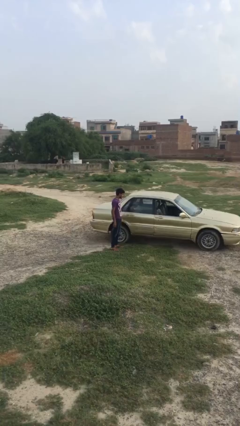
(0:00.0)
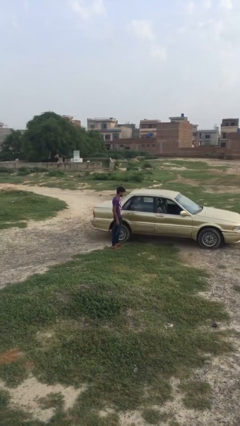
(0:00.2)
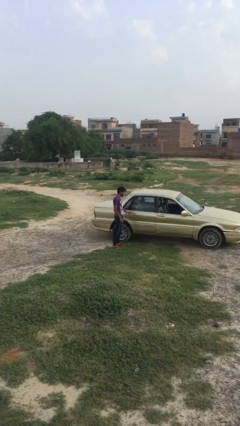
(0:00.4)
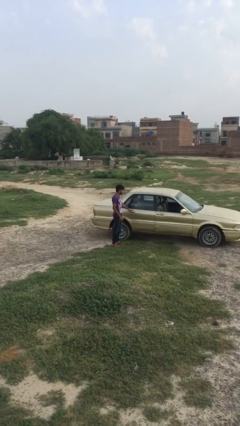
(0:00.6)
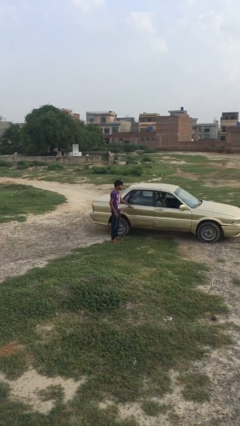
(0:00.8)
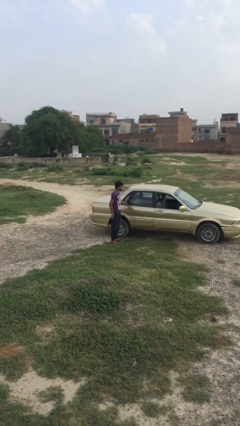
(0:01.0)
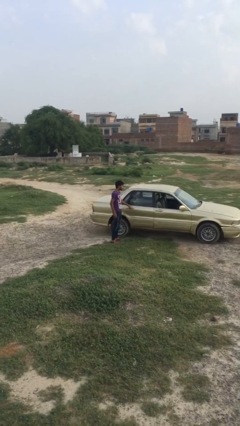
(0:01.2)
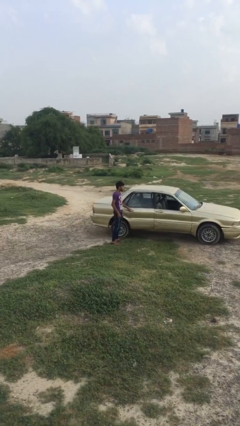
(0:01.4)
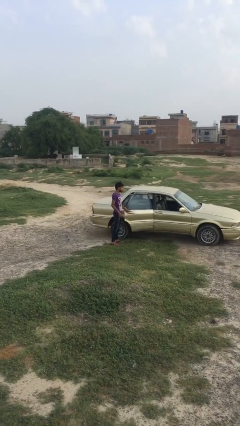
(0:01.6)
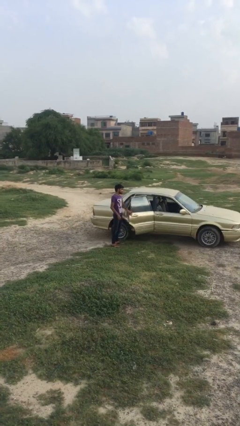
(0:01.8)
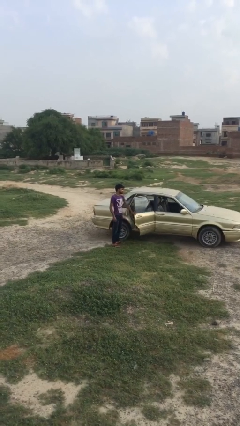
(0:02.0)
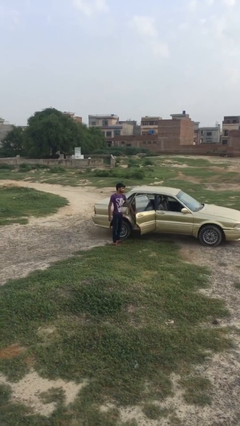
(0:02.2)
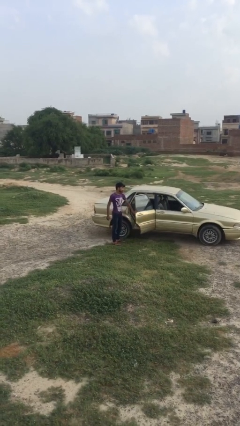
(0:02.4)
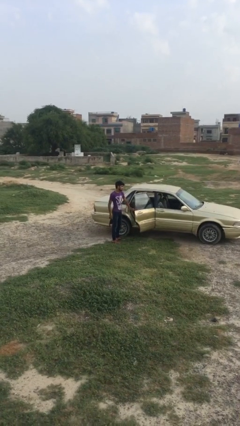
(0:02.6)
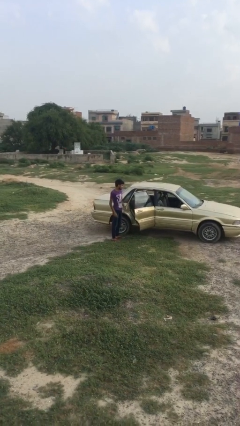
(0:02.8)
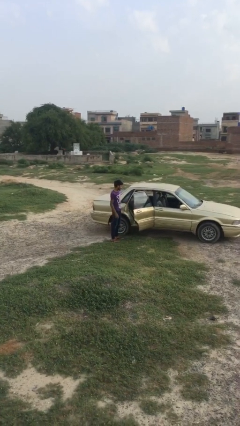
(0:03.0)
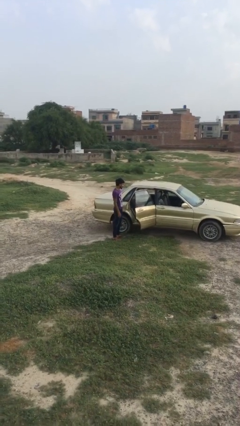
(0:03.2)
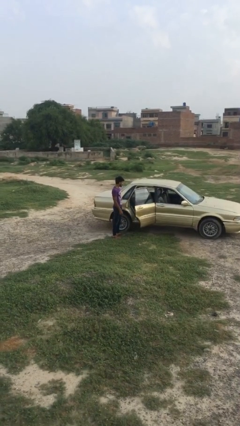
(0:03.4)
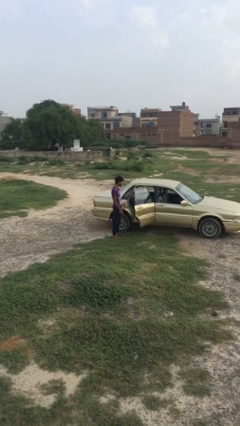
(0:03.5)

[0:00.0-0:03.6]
person opens car door

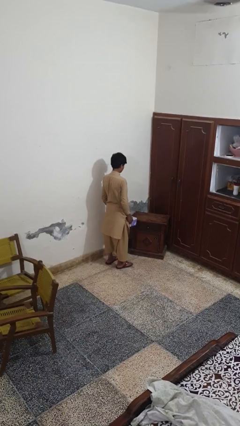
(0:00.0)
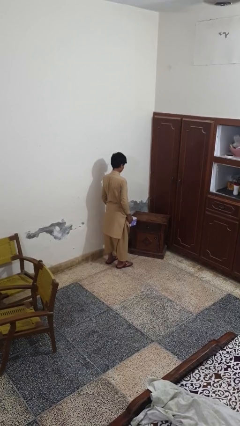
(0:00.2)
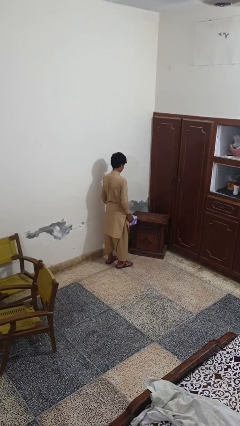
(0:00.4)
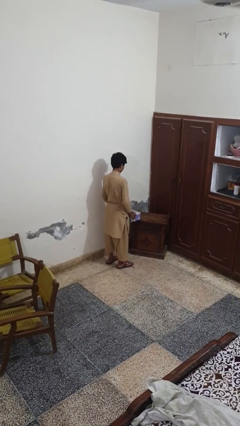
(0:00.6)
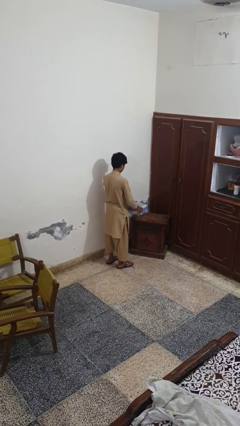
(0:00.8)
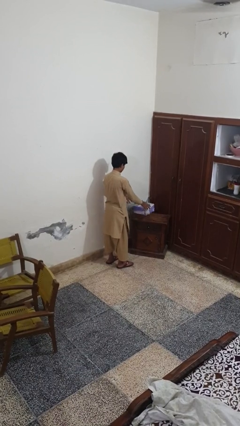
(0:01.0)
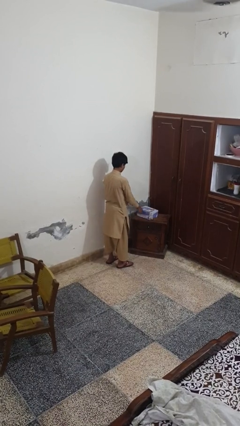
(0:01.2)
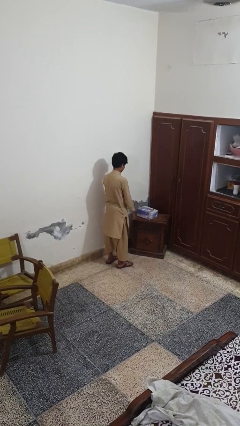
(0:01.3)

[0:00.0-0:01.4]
person throws object on table

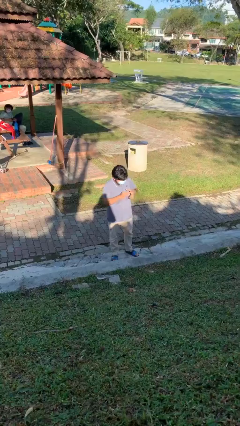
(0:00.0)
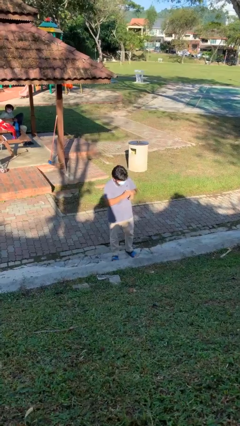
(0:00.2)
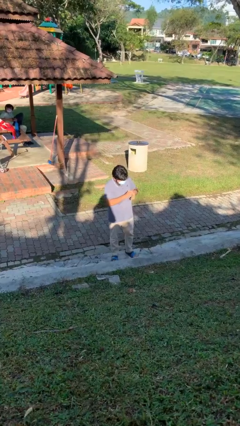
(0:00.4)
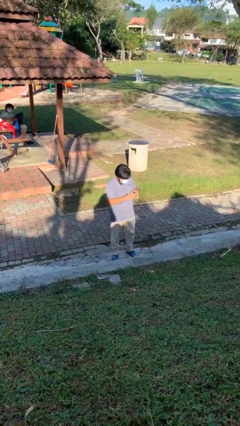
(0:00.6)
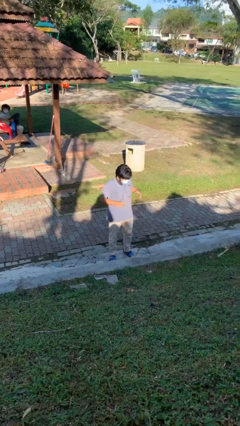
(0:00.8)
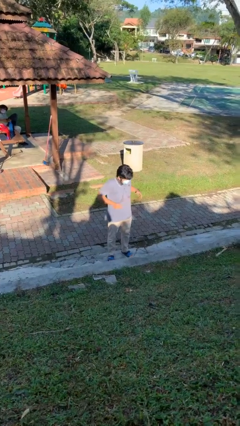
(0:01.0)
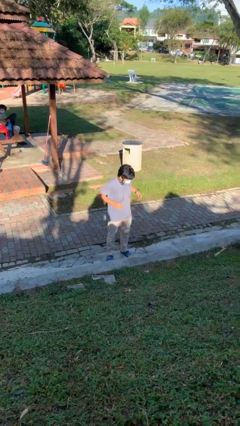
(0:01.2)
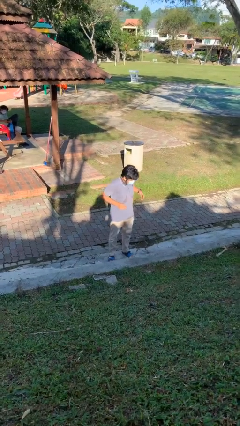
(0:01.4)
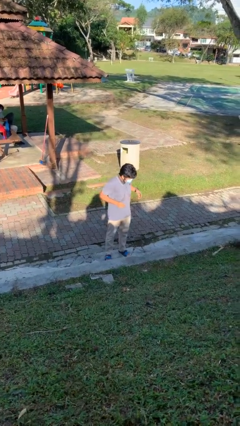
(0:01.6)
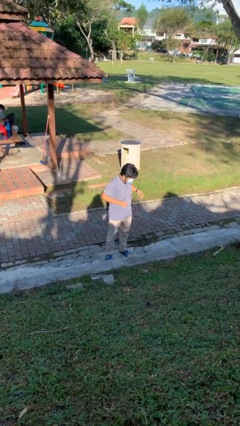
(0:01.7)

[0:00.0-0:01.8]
person puts on ring

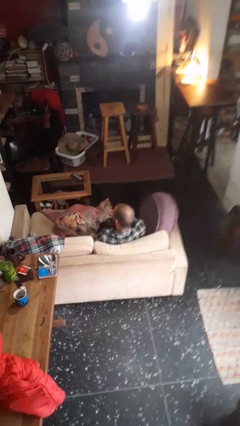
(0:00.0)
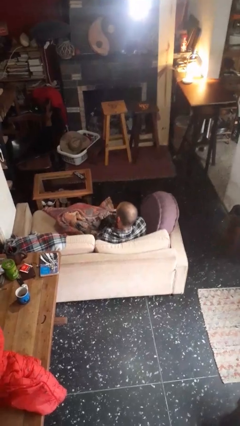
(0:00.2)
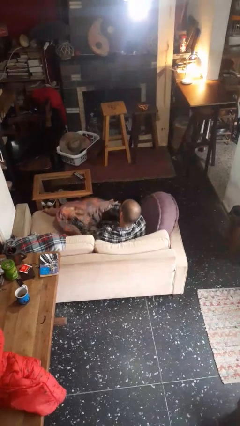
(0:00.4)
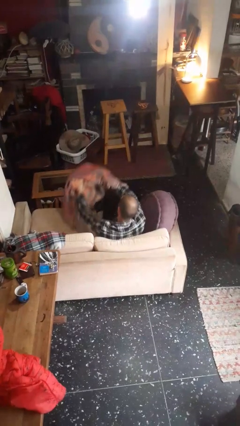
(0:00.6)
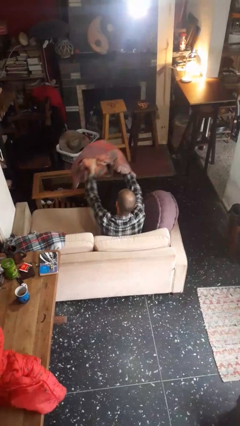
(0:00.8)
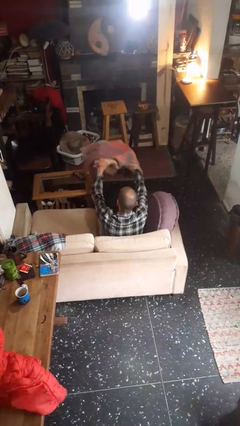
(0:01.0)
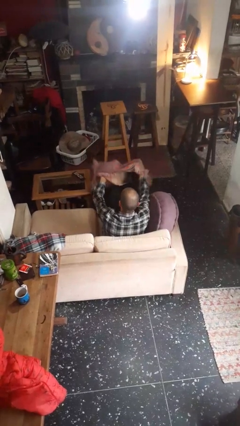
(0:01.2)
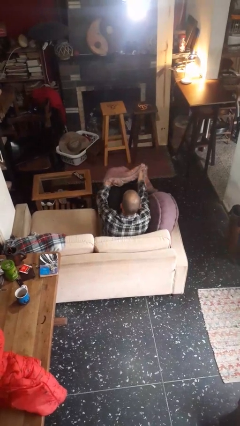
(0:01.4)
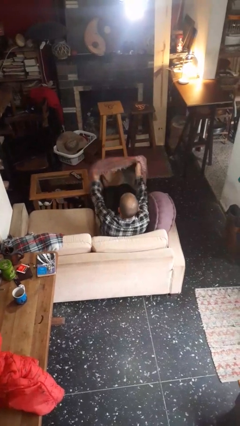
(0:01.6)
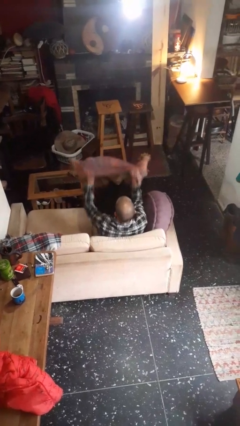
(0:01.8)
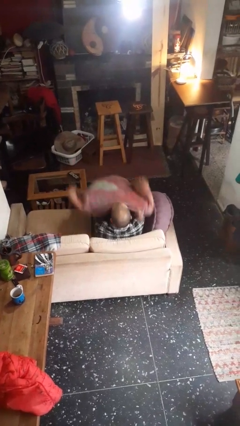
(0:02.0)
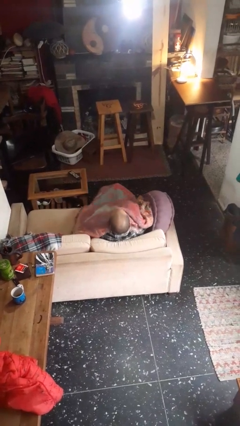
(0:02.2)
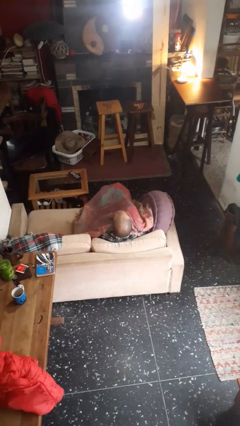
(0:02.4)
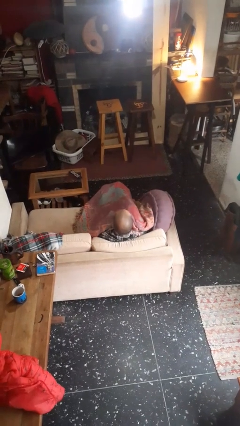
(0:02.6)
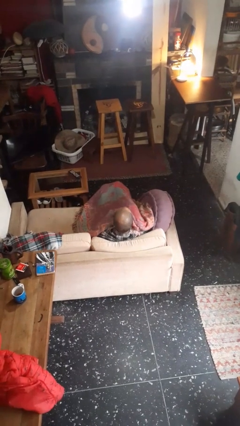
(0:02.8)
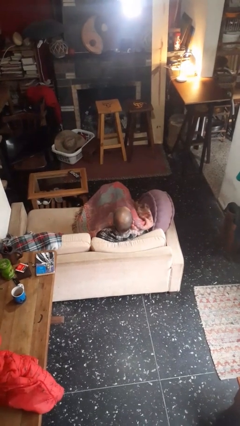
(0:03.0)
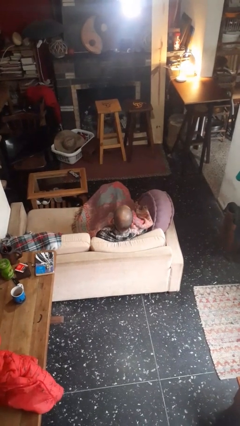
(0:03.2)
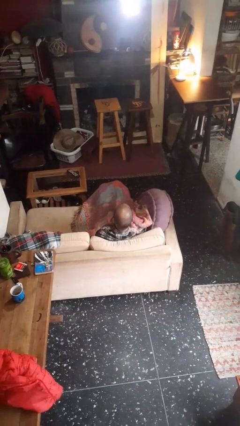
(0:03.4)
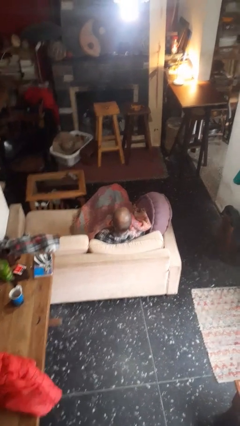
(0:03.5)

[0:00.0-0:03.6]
person covers with blanket

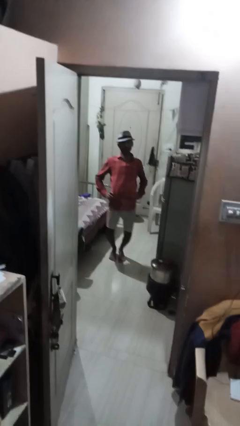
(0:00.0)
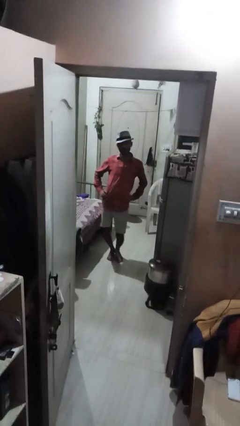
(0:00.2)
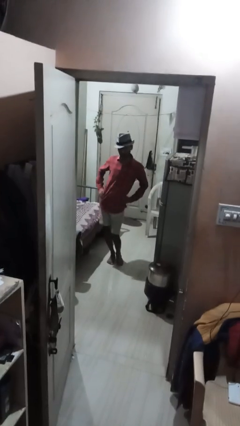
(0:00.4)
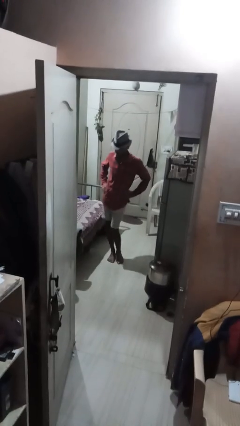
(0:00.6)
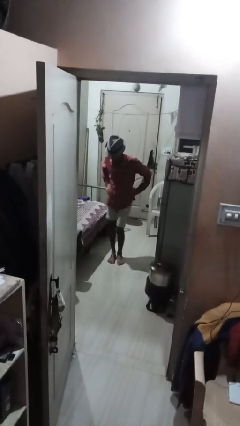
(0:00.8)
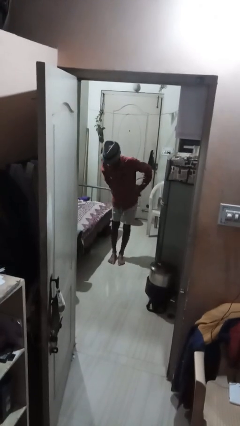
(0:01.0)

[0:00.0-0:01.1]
person wiggles hips

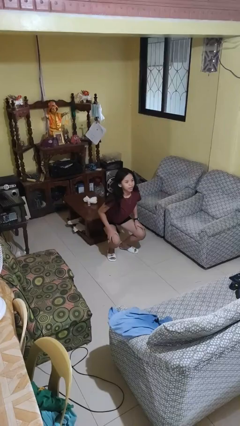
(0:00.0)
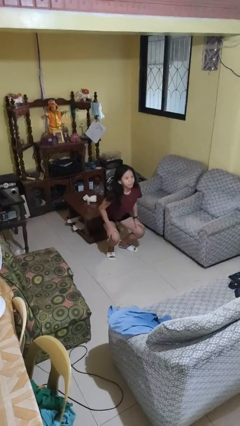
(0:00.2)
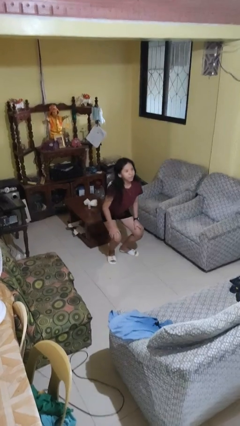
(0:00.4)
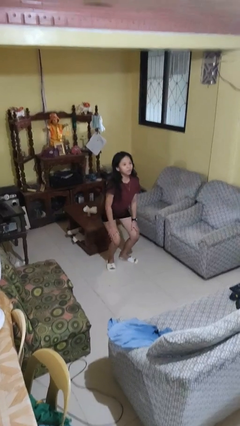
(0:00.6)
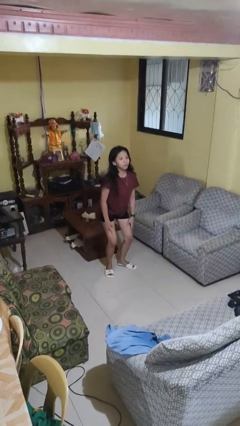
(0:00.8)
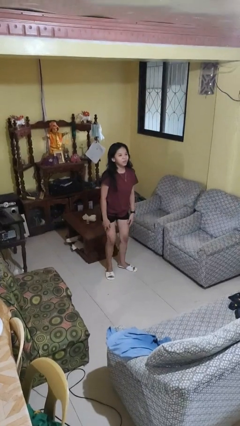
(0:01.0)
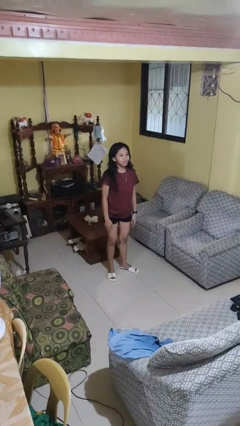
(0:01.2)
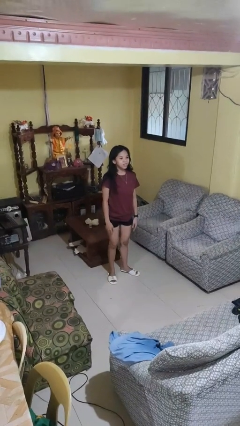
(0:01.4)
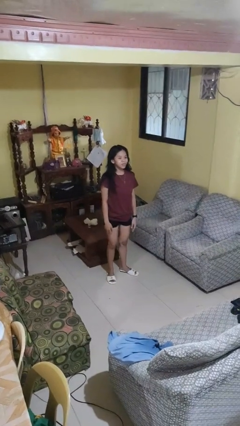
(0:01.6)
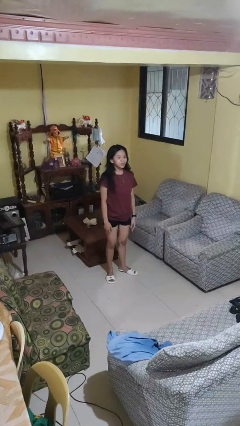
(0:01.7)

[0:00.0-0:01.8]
person stands up

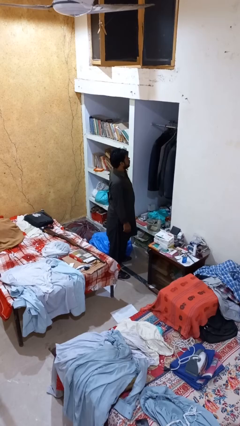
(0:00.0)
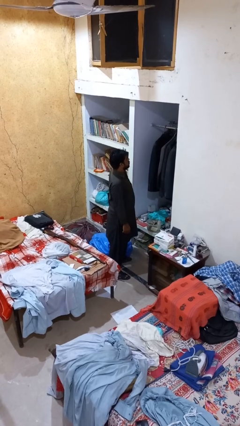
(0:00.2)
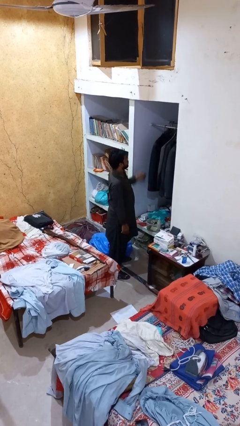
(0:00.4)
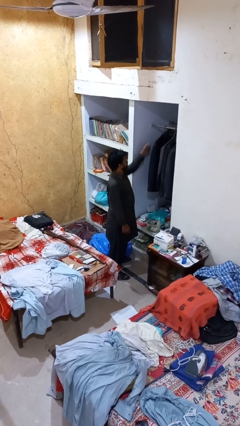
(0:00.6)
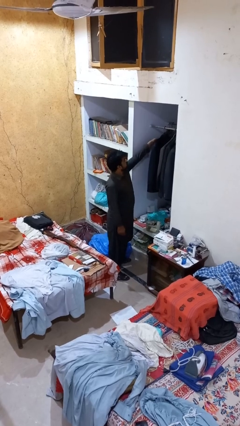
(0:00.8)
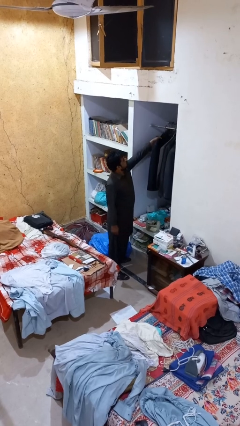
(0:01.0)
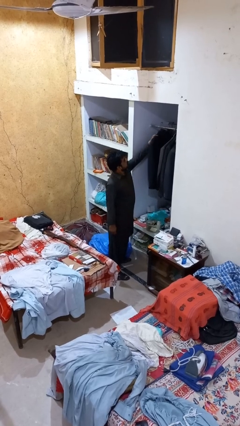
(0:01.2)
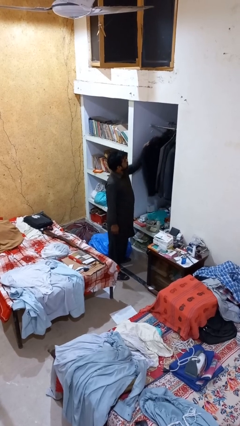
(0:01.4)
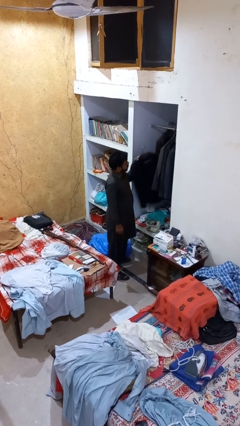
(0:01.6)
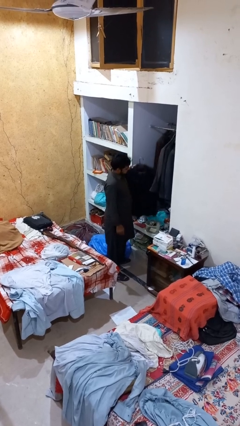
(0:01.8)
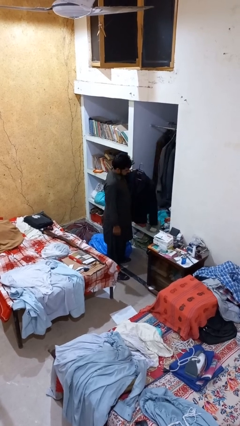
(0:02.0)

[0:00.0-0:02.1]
person takes clothes from closet

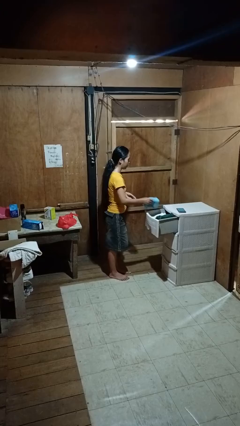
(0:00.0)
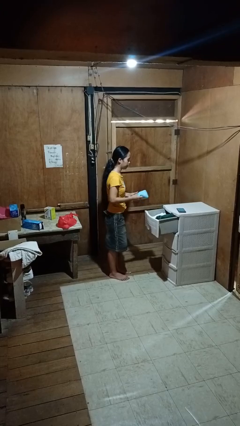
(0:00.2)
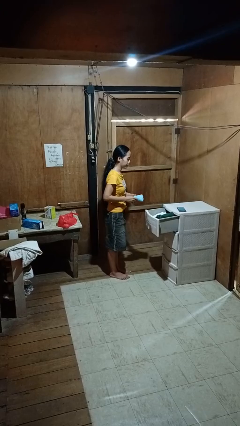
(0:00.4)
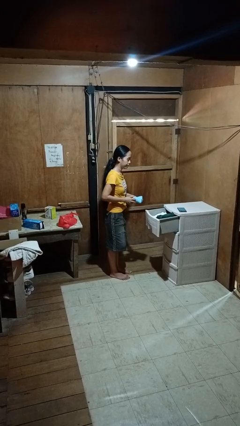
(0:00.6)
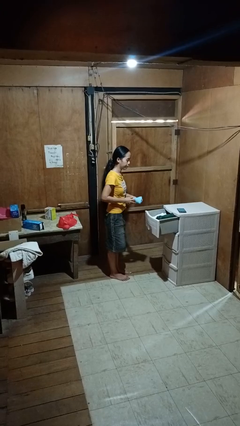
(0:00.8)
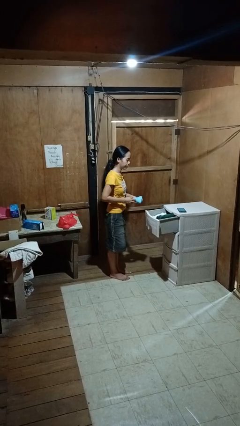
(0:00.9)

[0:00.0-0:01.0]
person takes clothes from dresser

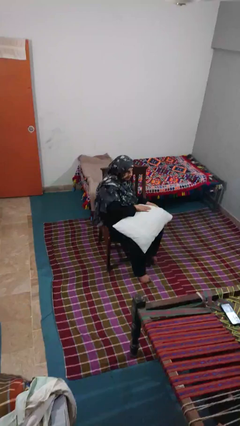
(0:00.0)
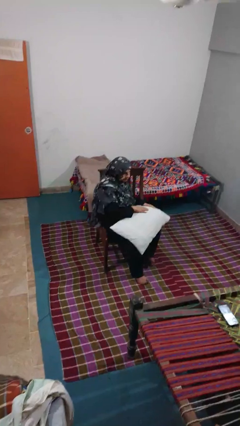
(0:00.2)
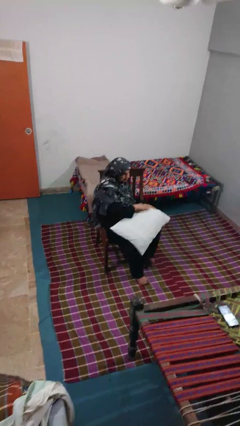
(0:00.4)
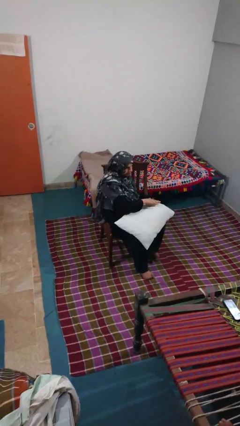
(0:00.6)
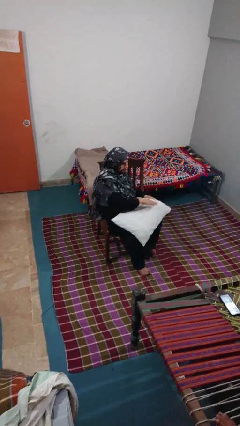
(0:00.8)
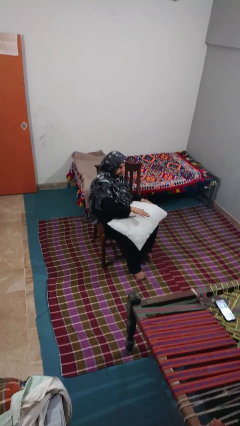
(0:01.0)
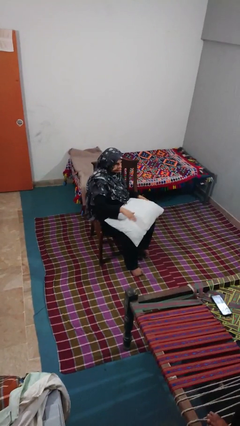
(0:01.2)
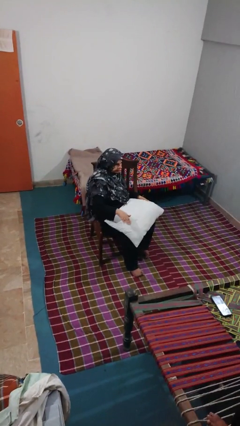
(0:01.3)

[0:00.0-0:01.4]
person waves hand over object
